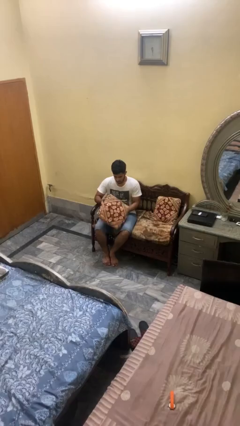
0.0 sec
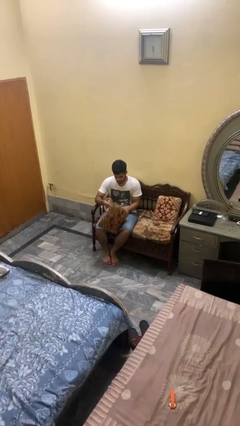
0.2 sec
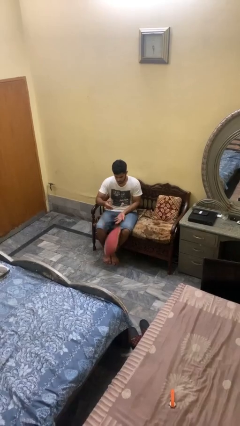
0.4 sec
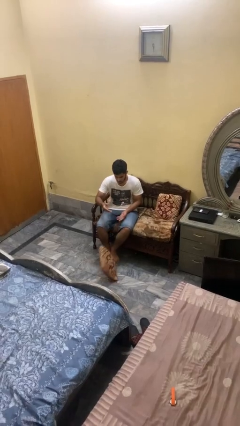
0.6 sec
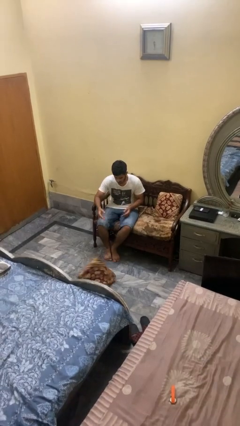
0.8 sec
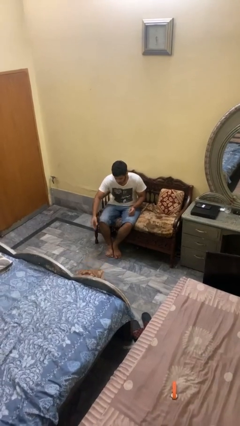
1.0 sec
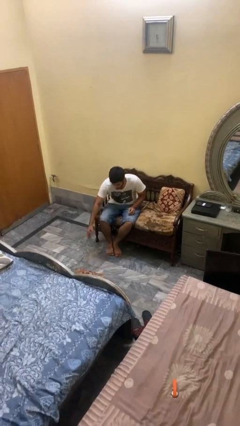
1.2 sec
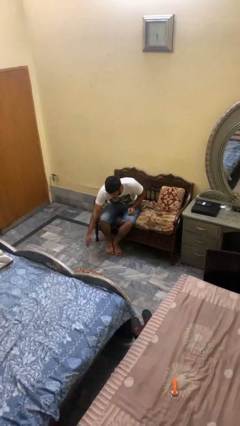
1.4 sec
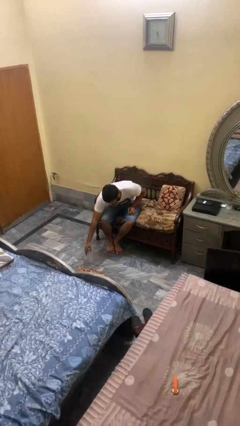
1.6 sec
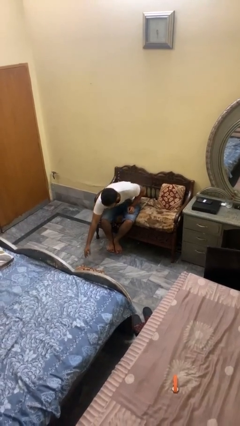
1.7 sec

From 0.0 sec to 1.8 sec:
person drops object

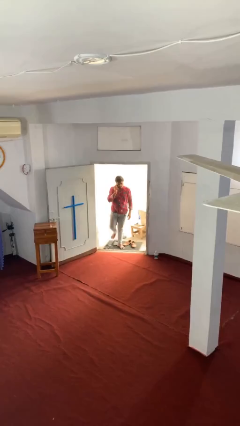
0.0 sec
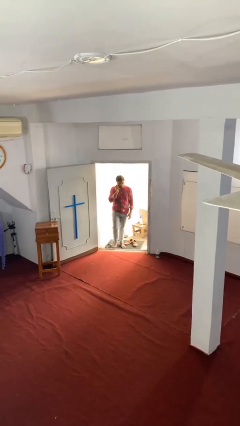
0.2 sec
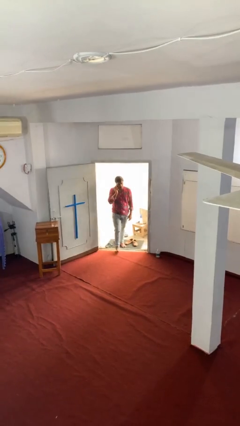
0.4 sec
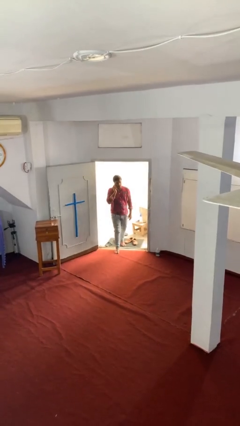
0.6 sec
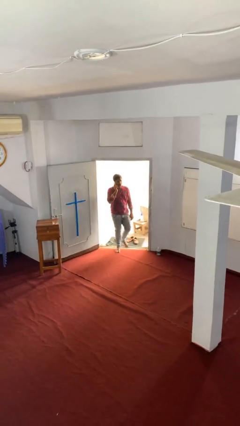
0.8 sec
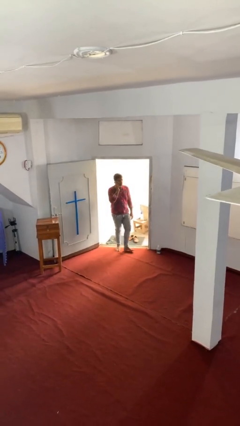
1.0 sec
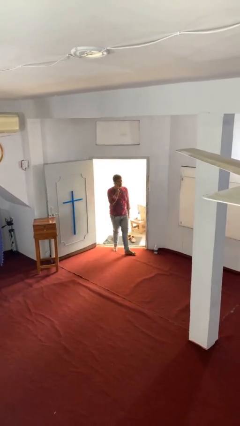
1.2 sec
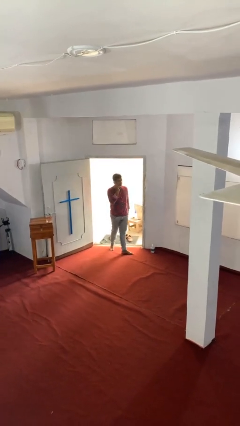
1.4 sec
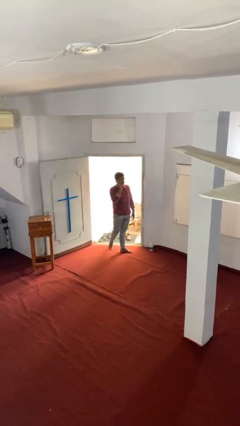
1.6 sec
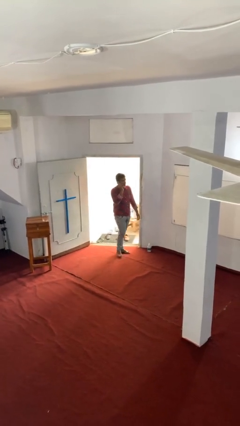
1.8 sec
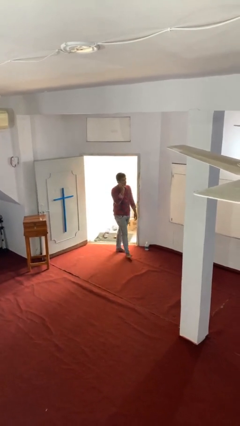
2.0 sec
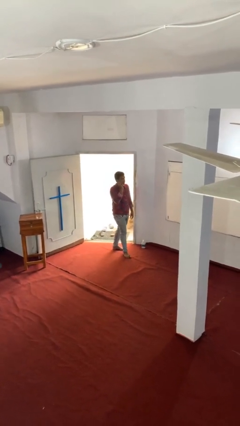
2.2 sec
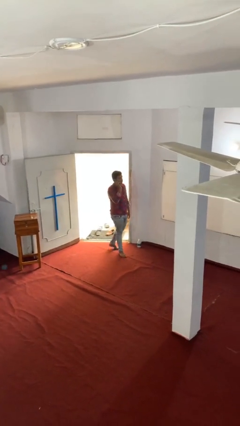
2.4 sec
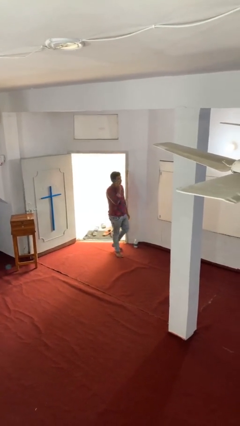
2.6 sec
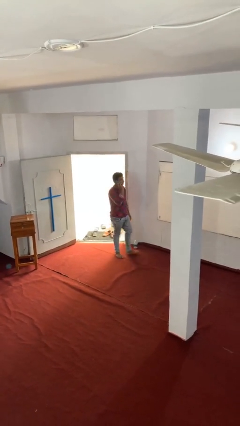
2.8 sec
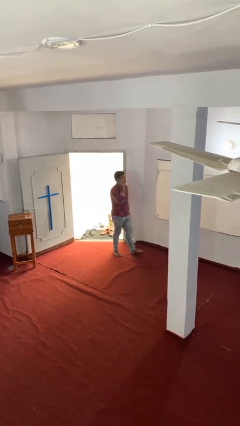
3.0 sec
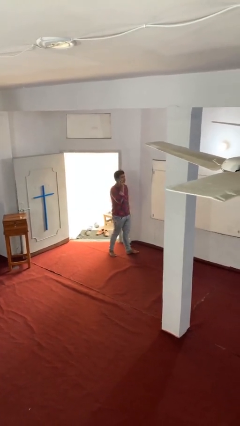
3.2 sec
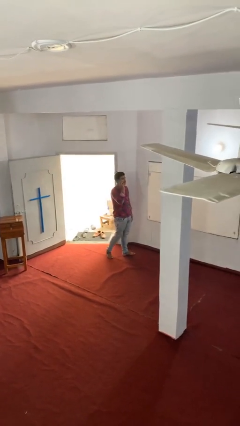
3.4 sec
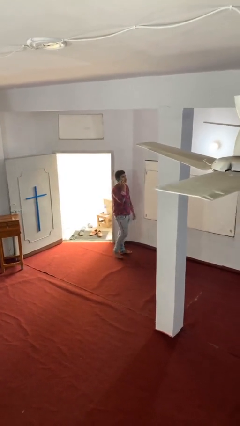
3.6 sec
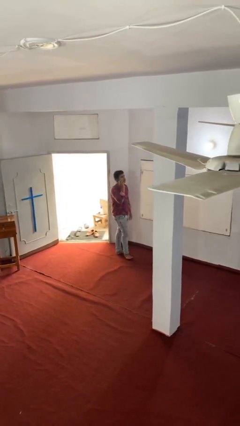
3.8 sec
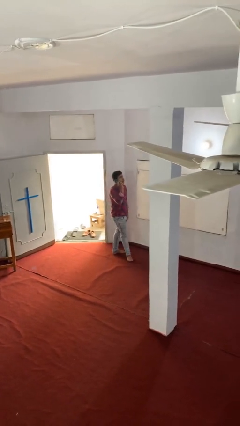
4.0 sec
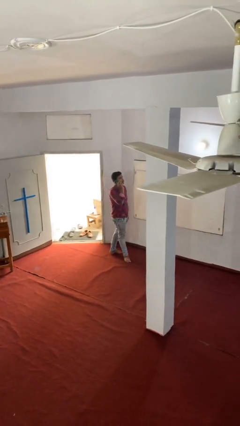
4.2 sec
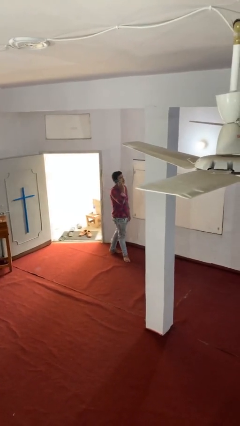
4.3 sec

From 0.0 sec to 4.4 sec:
person enters scene through structure

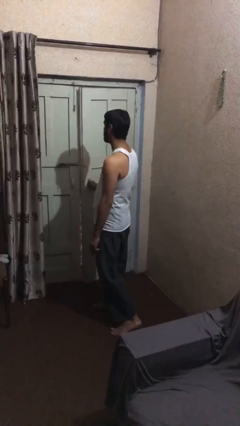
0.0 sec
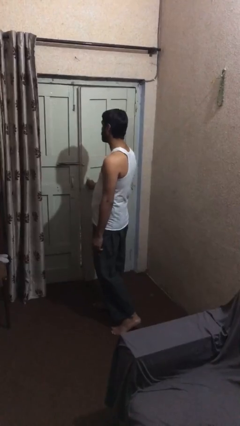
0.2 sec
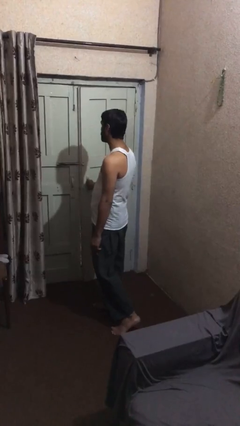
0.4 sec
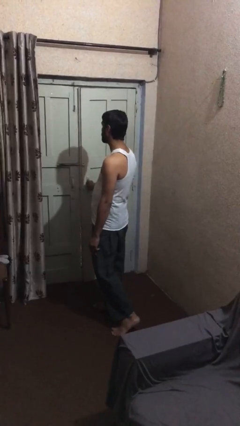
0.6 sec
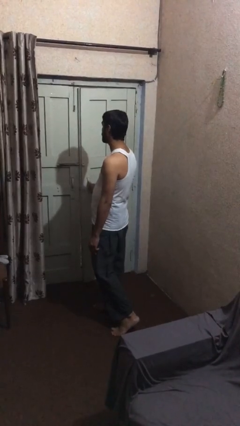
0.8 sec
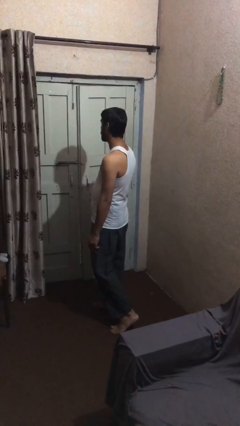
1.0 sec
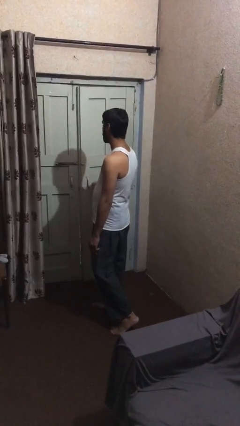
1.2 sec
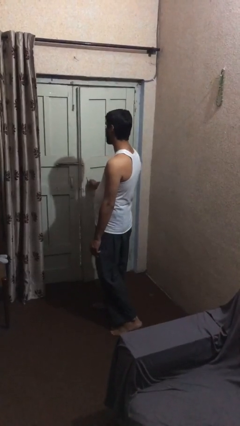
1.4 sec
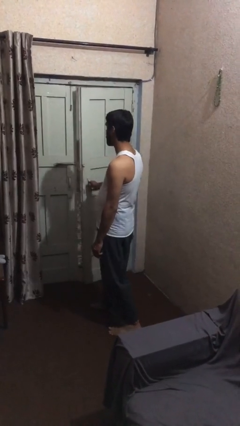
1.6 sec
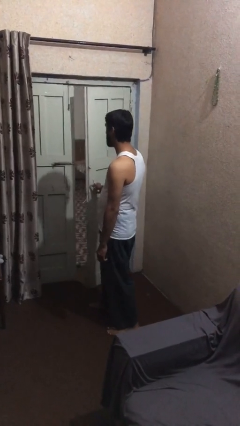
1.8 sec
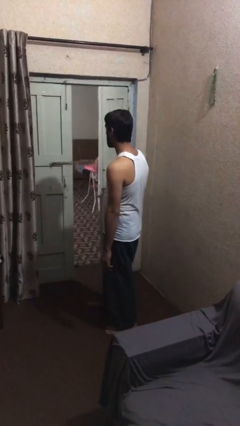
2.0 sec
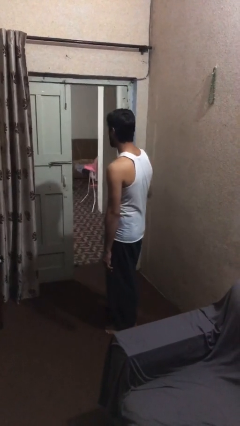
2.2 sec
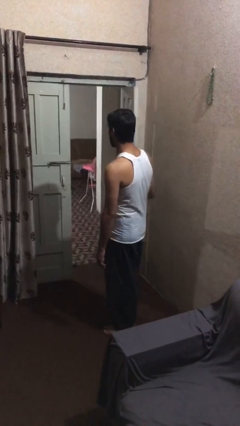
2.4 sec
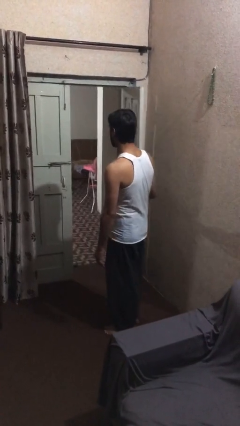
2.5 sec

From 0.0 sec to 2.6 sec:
person opens facility door

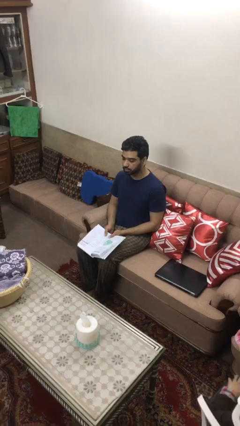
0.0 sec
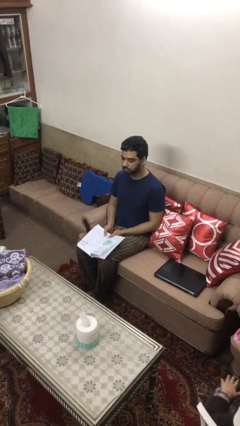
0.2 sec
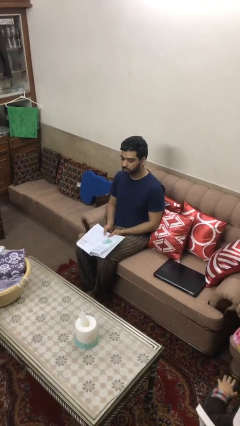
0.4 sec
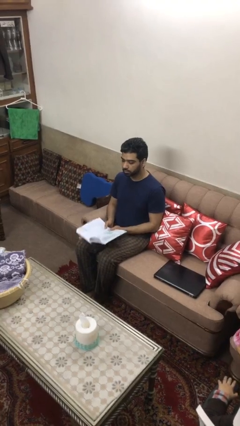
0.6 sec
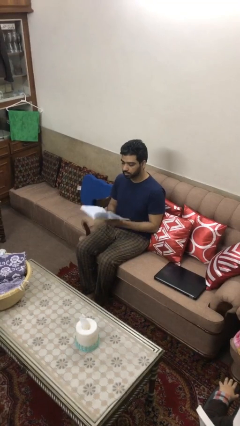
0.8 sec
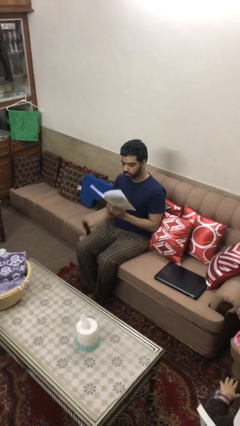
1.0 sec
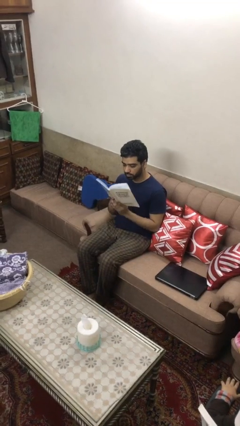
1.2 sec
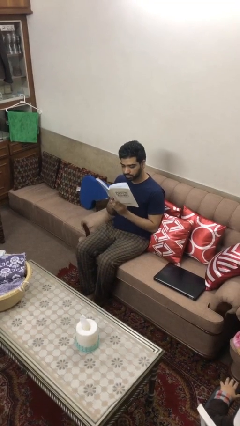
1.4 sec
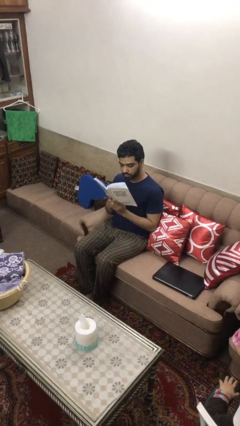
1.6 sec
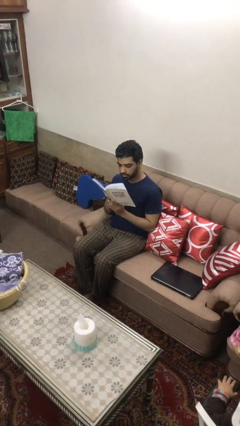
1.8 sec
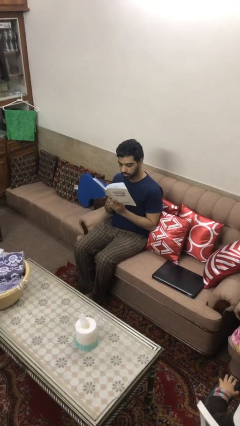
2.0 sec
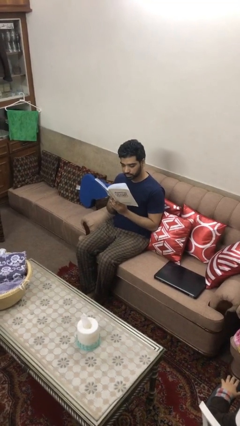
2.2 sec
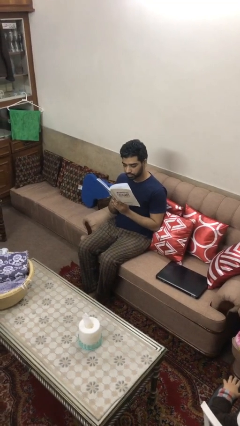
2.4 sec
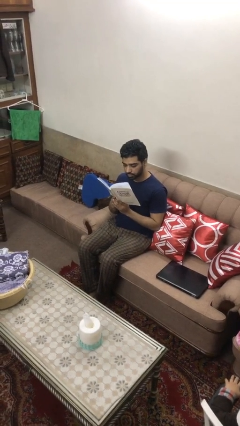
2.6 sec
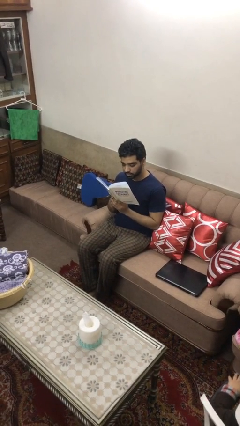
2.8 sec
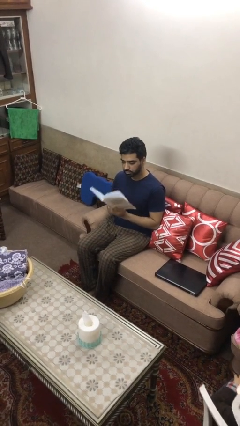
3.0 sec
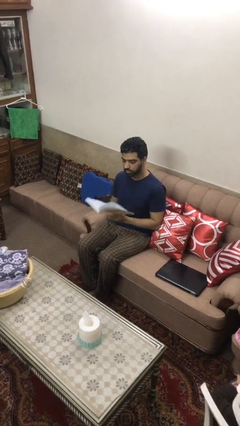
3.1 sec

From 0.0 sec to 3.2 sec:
person reads document

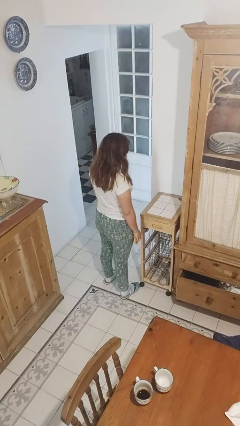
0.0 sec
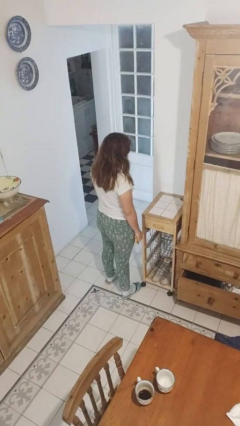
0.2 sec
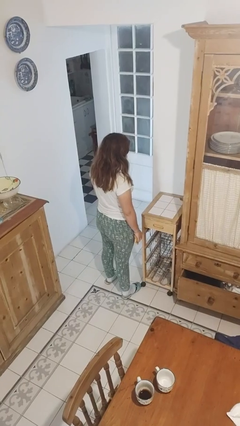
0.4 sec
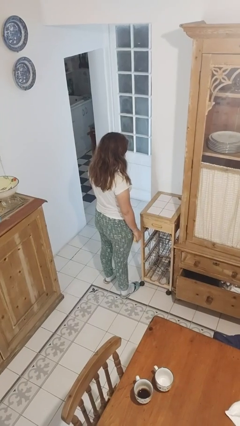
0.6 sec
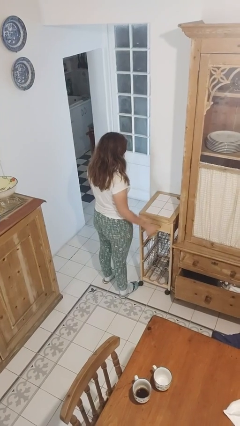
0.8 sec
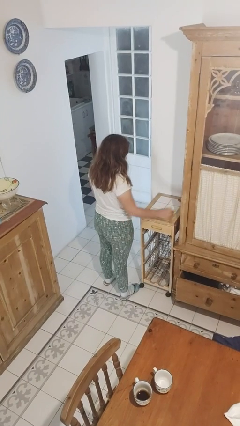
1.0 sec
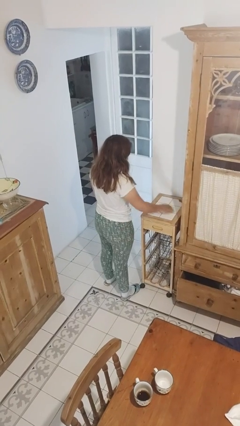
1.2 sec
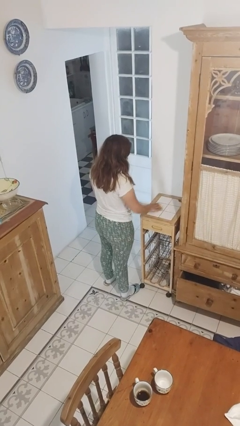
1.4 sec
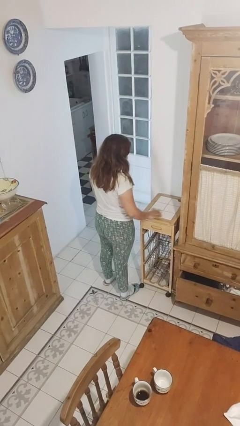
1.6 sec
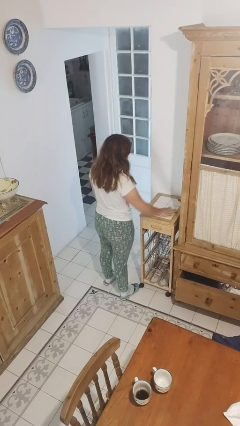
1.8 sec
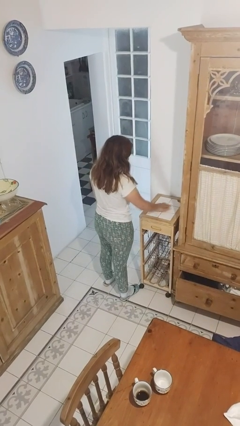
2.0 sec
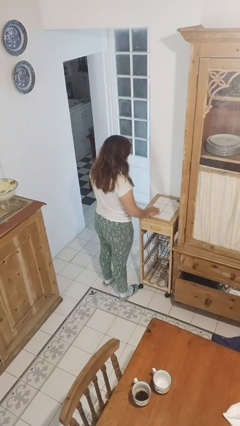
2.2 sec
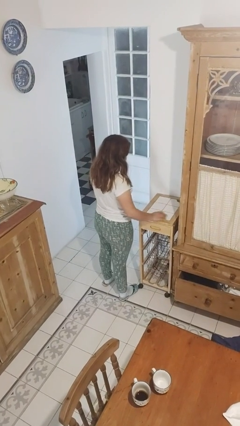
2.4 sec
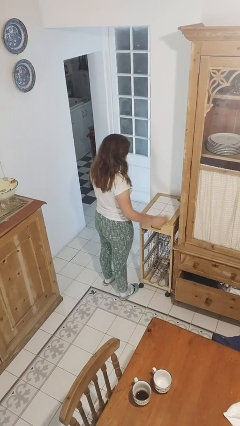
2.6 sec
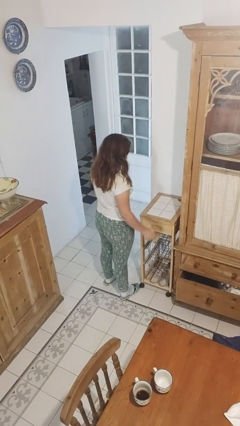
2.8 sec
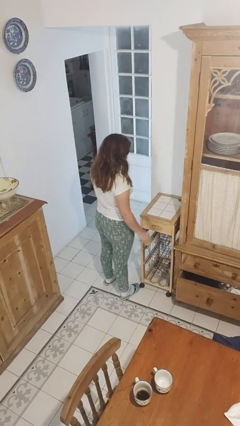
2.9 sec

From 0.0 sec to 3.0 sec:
person cleans table with rag

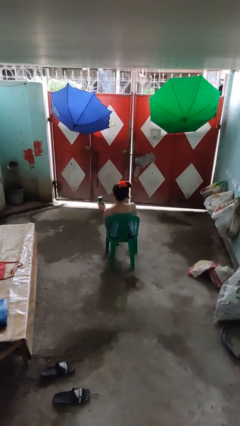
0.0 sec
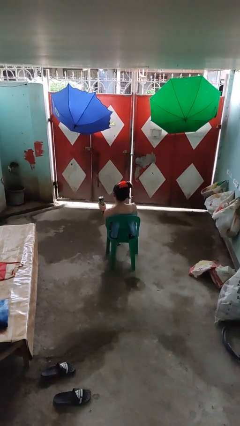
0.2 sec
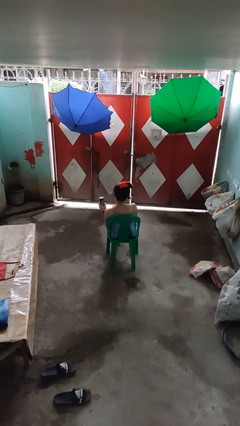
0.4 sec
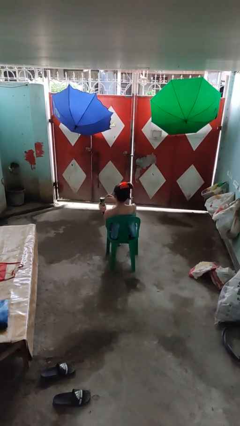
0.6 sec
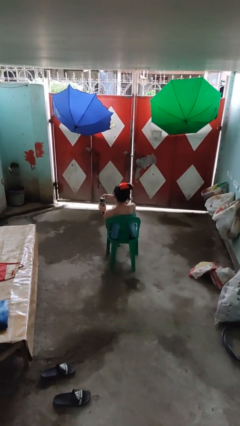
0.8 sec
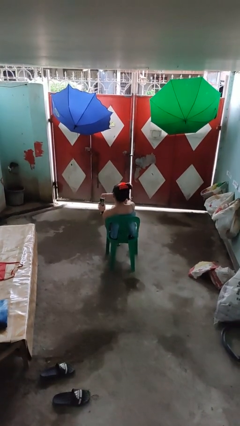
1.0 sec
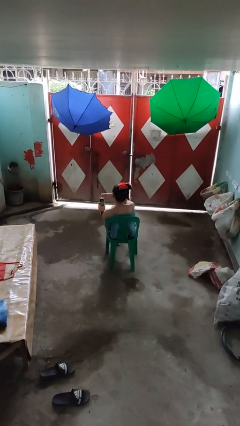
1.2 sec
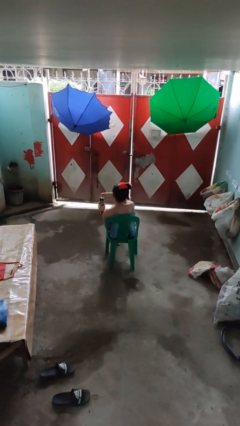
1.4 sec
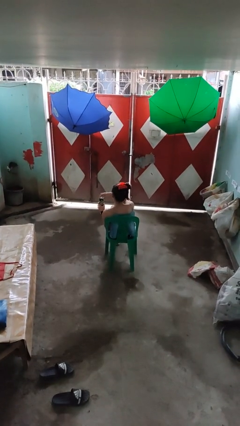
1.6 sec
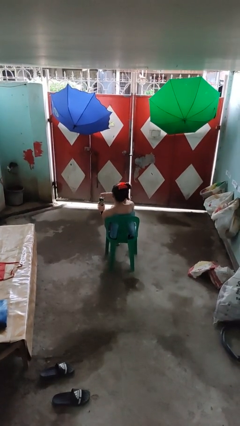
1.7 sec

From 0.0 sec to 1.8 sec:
person opens beverage can

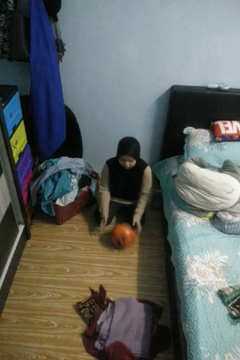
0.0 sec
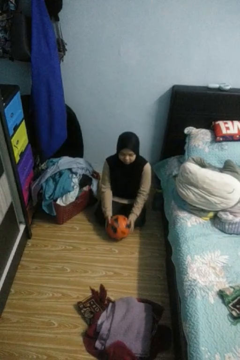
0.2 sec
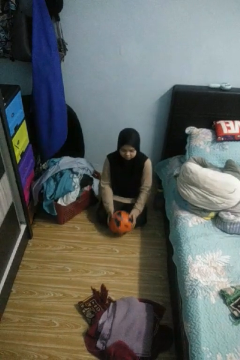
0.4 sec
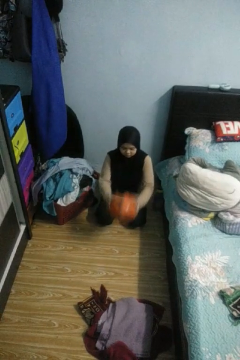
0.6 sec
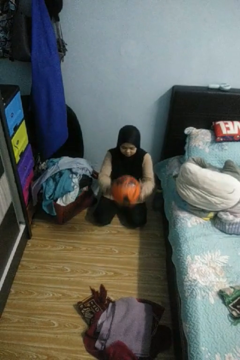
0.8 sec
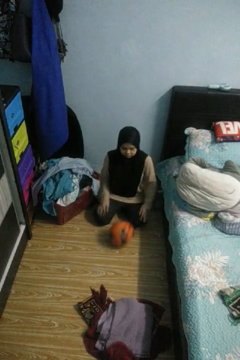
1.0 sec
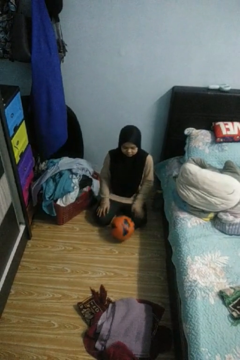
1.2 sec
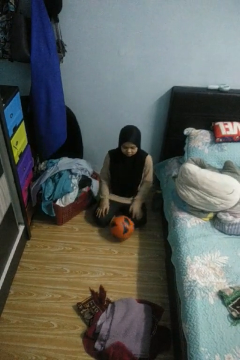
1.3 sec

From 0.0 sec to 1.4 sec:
person bounces ball on floor
